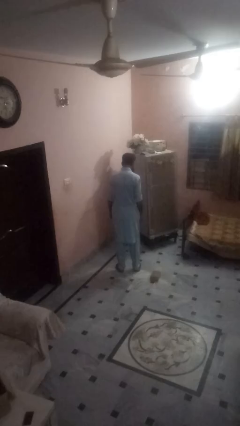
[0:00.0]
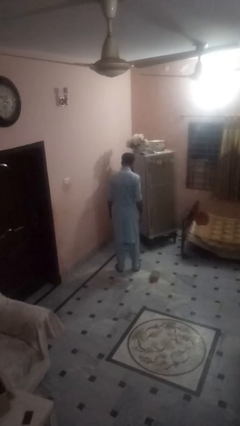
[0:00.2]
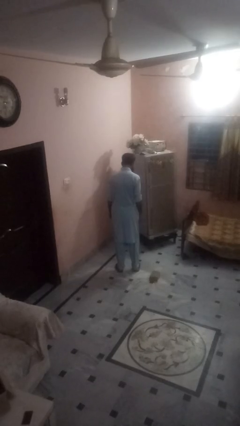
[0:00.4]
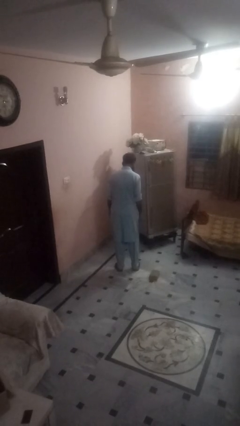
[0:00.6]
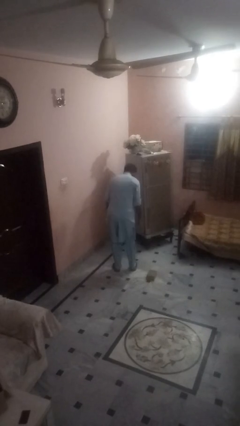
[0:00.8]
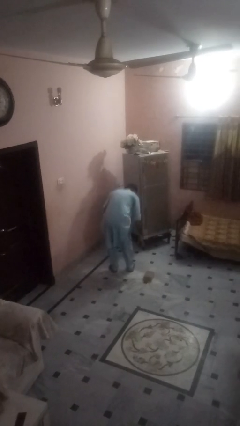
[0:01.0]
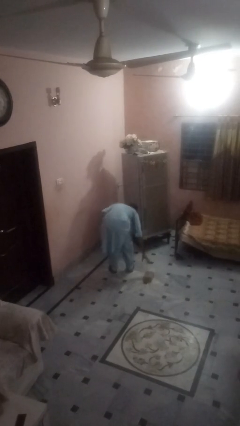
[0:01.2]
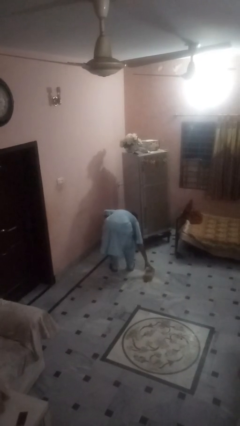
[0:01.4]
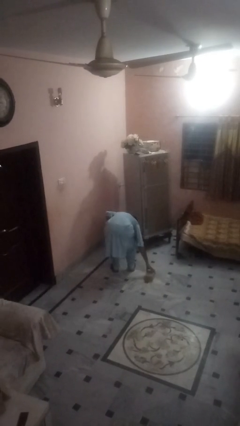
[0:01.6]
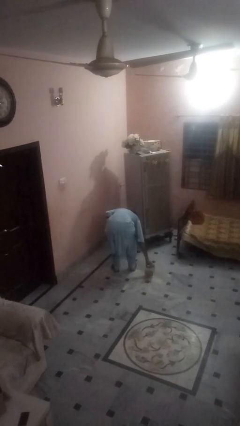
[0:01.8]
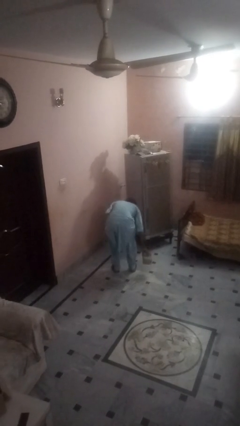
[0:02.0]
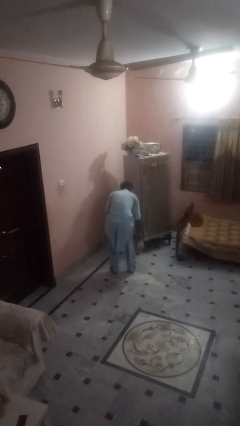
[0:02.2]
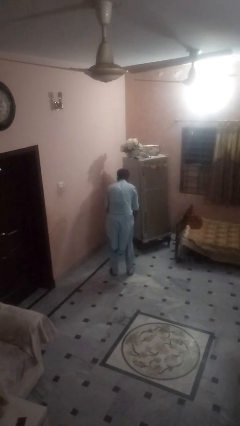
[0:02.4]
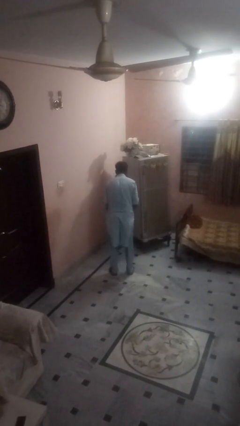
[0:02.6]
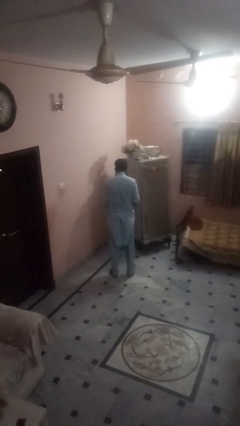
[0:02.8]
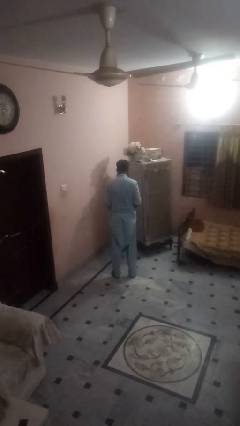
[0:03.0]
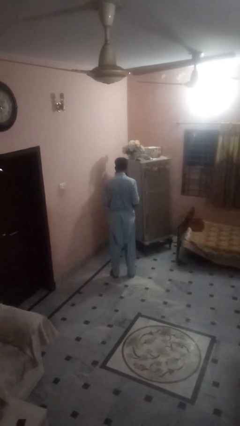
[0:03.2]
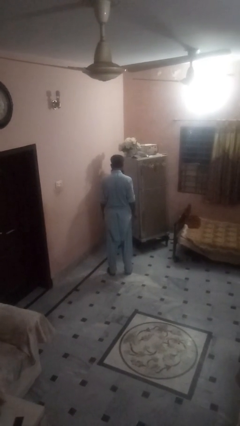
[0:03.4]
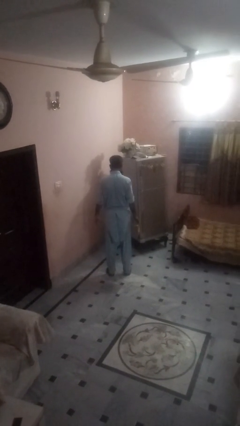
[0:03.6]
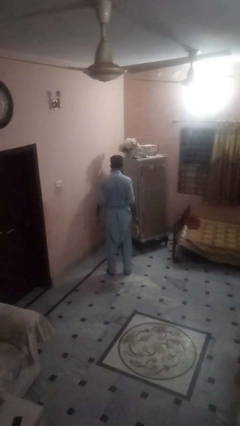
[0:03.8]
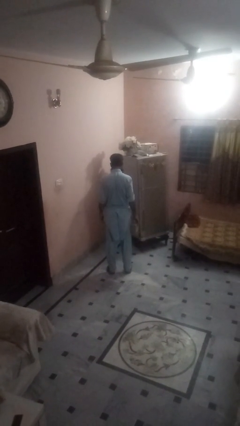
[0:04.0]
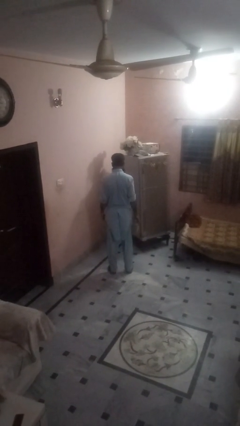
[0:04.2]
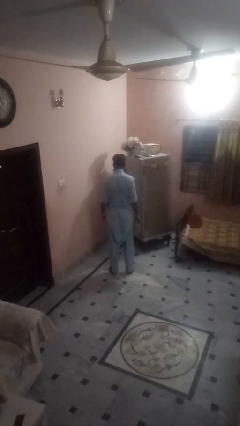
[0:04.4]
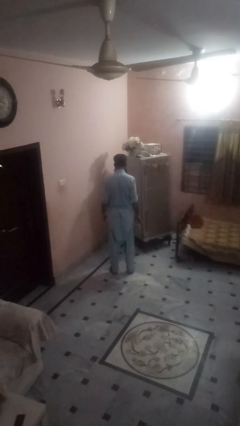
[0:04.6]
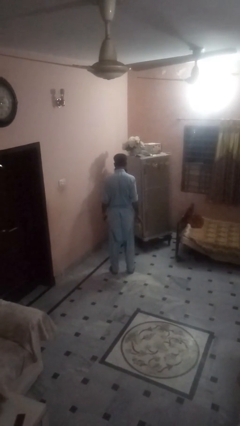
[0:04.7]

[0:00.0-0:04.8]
person picks up object from floor

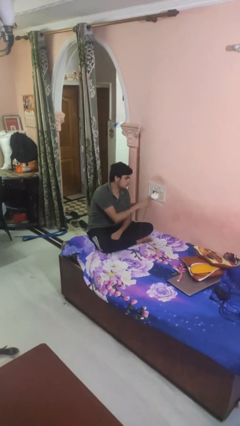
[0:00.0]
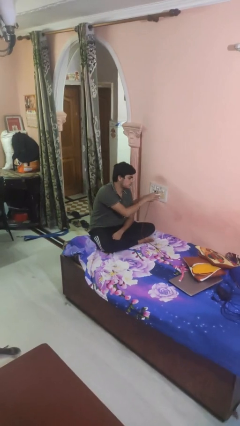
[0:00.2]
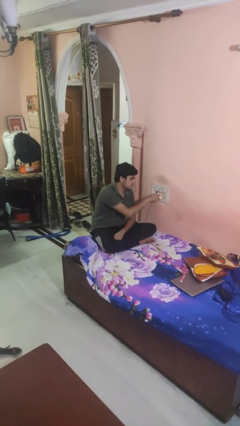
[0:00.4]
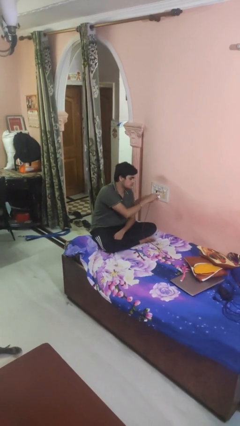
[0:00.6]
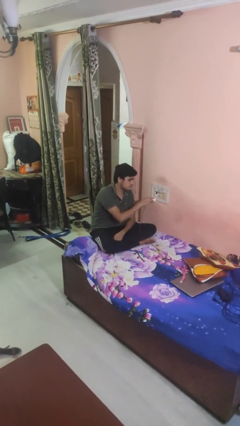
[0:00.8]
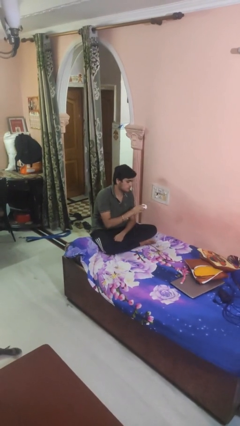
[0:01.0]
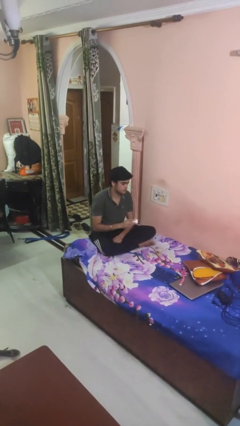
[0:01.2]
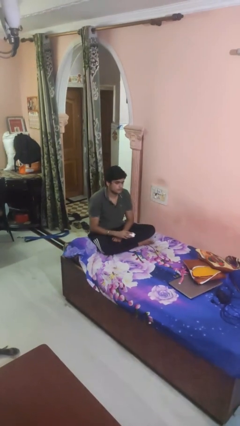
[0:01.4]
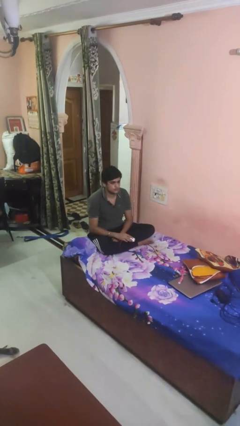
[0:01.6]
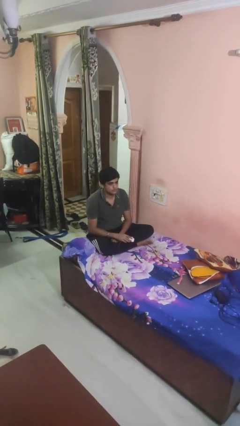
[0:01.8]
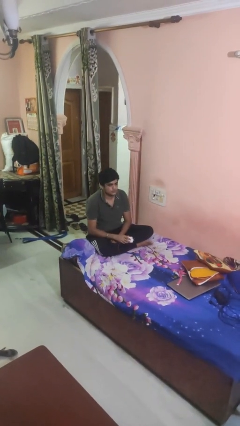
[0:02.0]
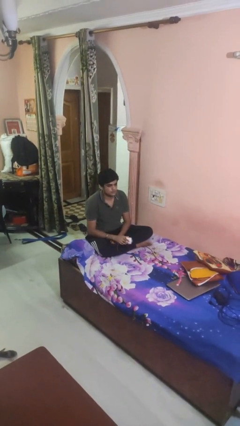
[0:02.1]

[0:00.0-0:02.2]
person unplugs from electrical socket

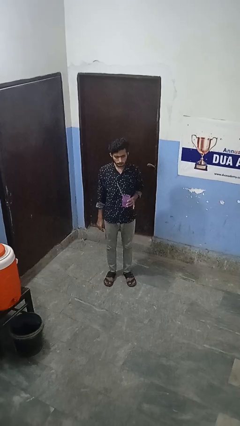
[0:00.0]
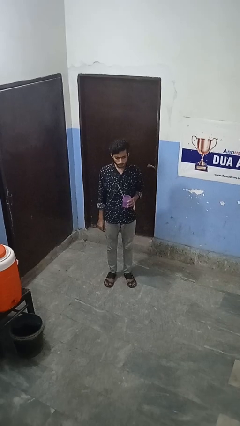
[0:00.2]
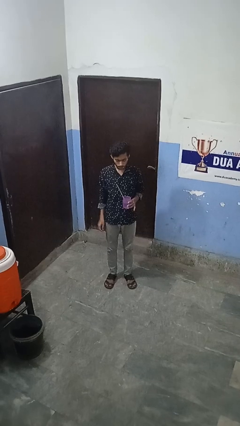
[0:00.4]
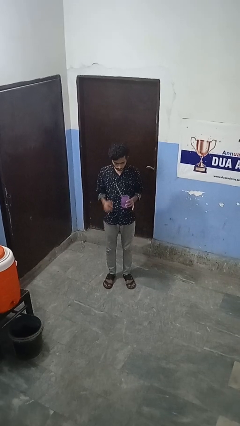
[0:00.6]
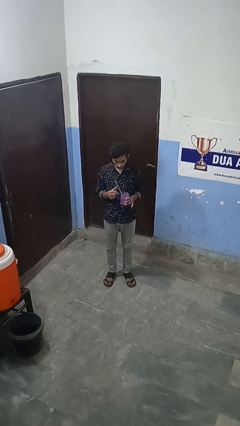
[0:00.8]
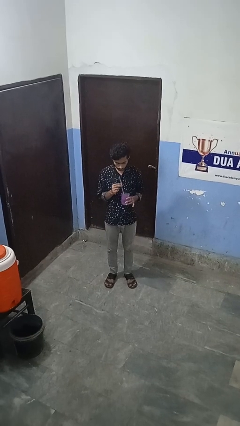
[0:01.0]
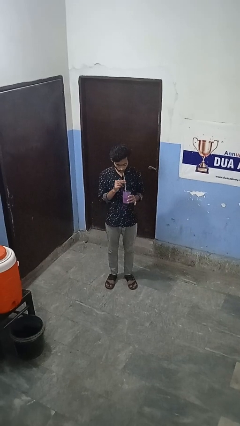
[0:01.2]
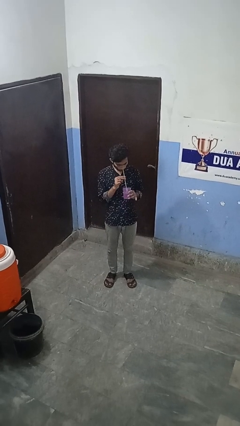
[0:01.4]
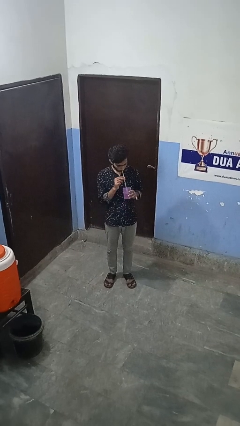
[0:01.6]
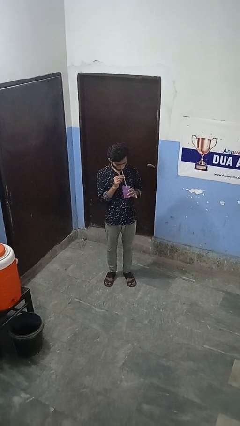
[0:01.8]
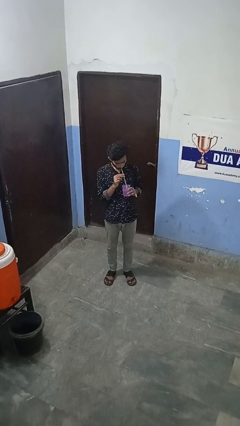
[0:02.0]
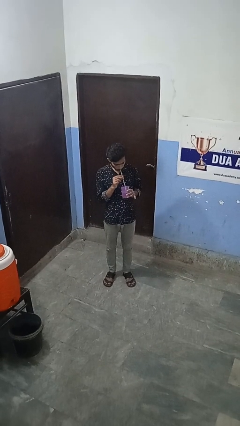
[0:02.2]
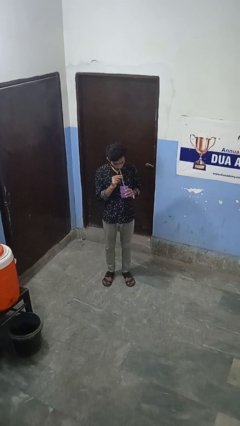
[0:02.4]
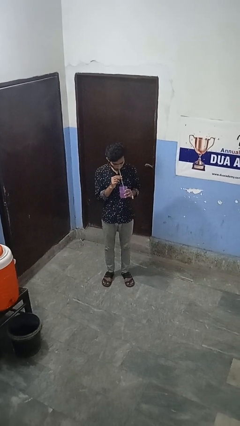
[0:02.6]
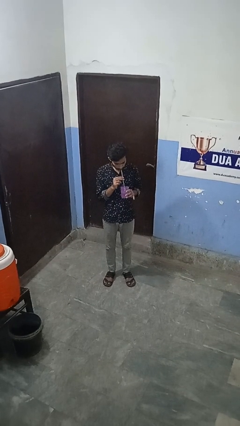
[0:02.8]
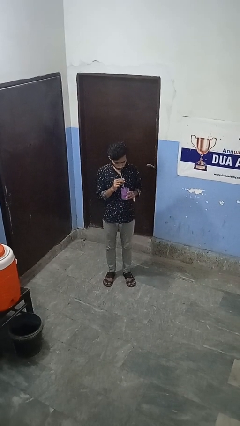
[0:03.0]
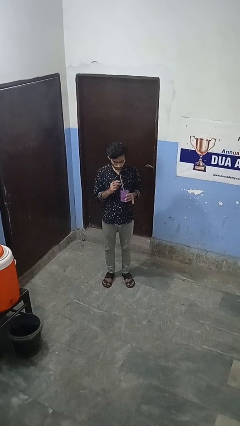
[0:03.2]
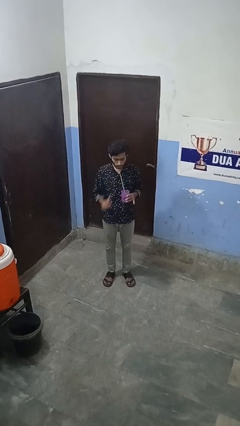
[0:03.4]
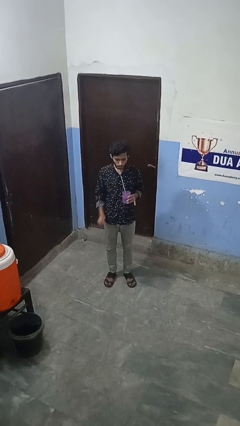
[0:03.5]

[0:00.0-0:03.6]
person drinks from straw

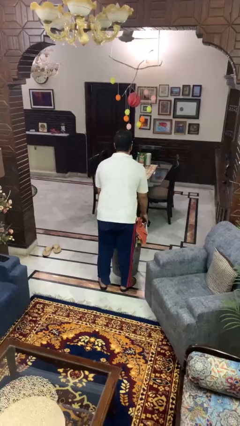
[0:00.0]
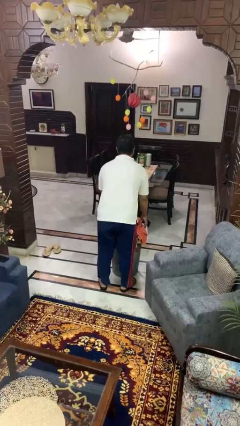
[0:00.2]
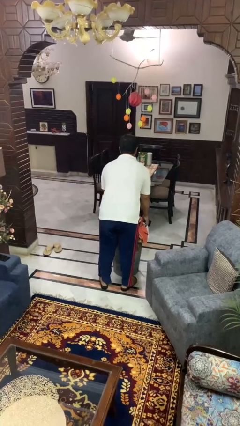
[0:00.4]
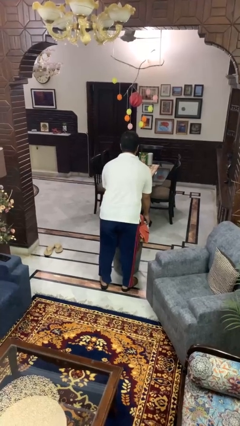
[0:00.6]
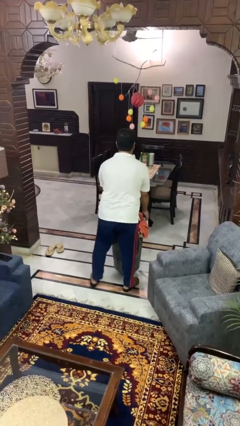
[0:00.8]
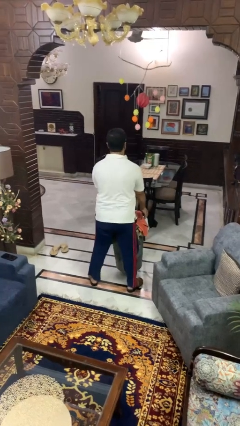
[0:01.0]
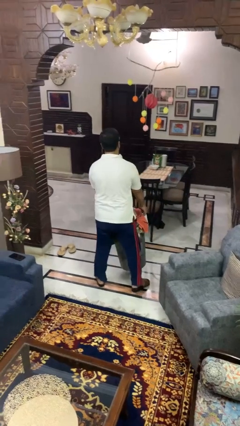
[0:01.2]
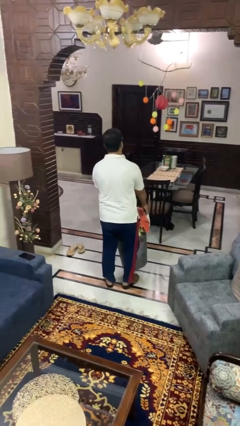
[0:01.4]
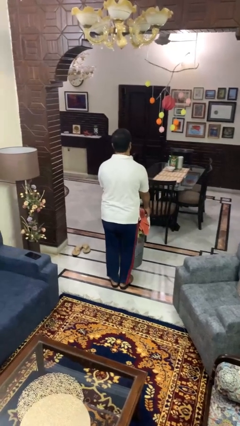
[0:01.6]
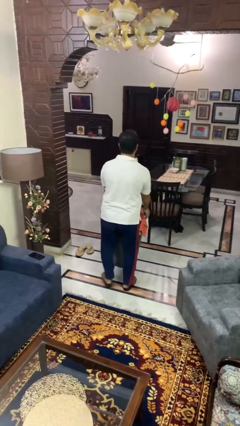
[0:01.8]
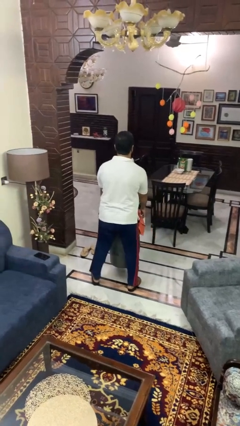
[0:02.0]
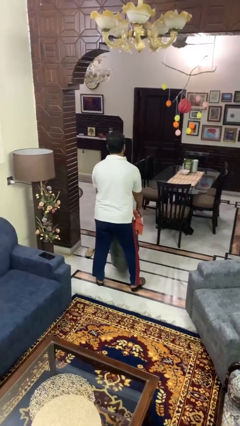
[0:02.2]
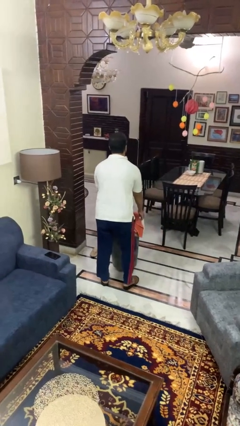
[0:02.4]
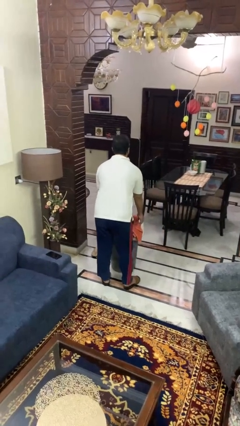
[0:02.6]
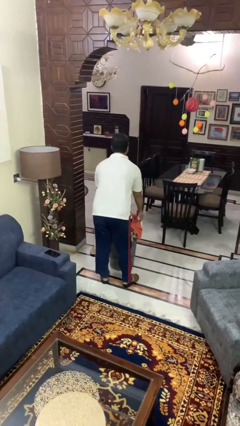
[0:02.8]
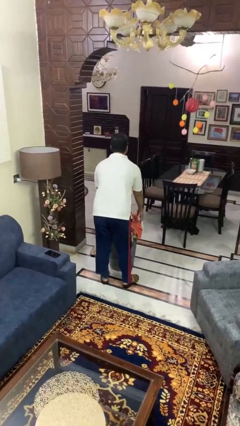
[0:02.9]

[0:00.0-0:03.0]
person carries laundry basket

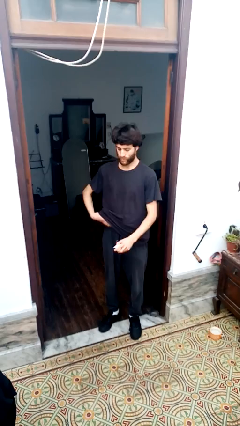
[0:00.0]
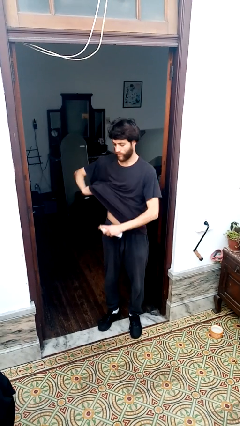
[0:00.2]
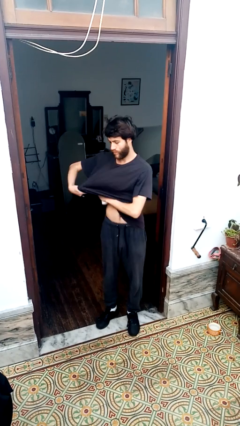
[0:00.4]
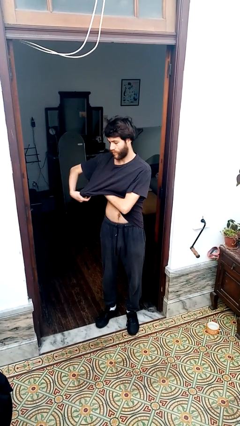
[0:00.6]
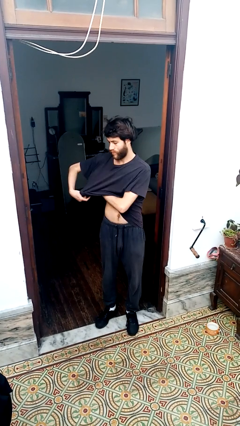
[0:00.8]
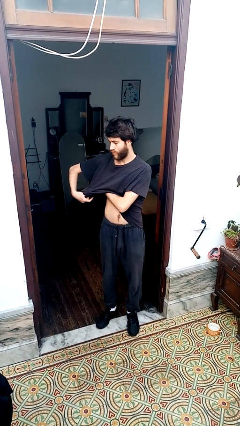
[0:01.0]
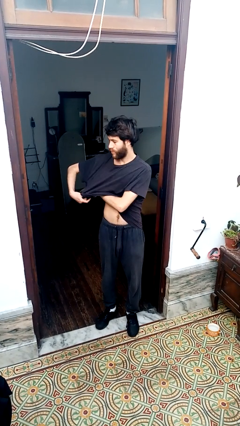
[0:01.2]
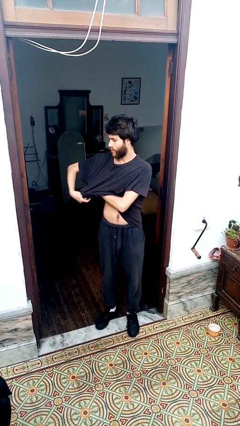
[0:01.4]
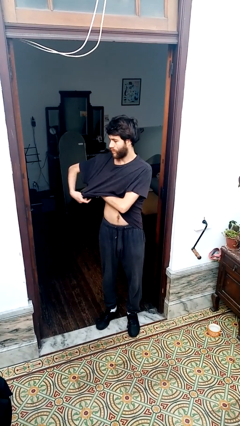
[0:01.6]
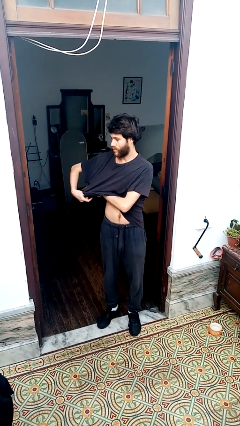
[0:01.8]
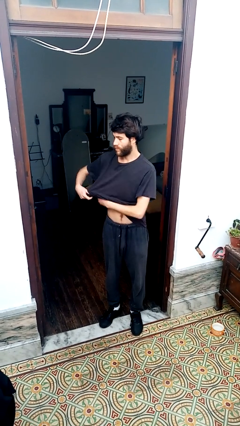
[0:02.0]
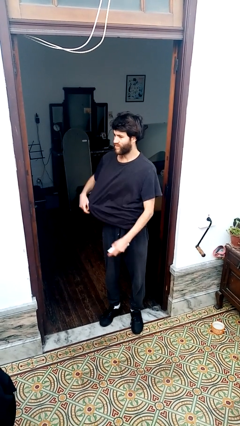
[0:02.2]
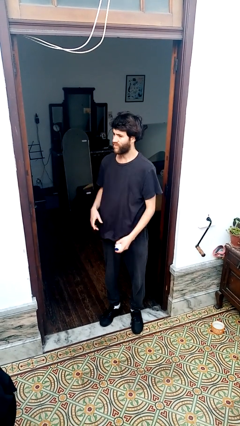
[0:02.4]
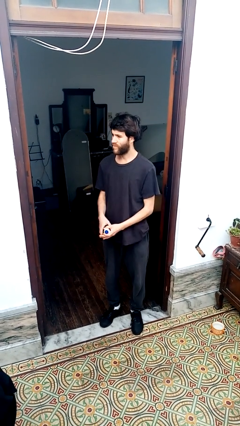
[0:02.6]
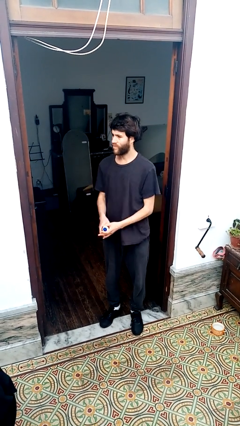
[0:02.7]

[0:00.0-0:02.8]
person applies deodorant

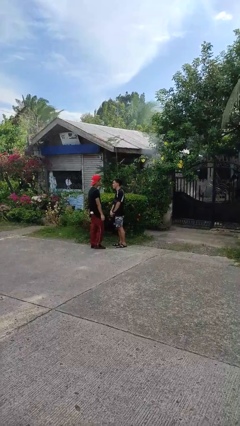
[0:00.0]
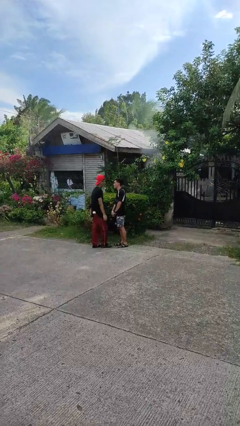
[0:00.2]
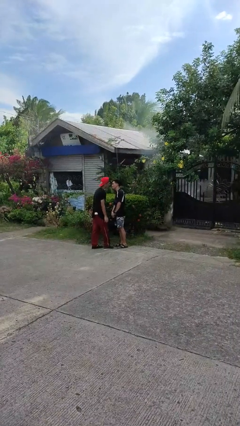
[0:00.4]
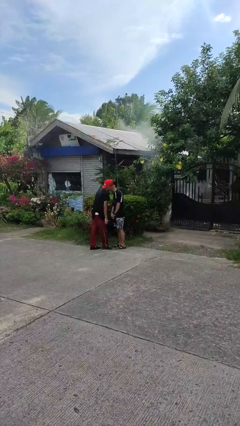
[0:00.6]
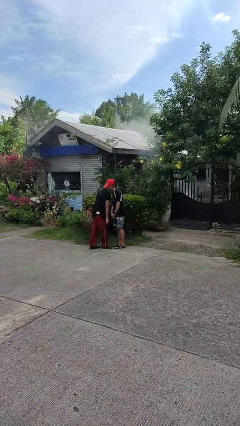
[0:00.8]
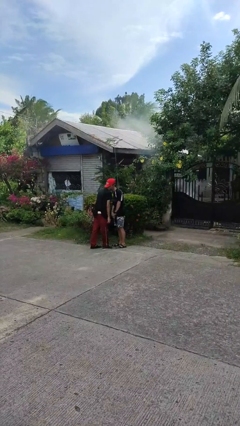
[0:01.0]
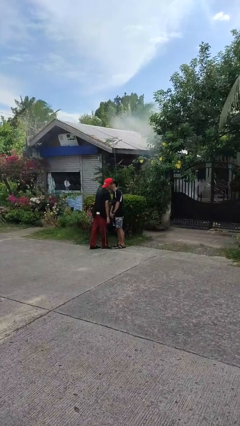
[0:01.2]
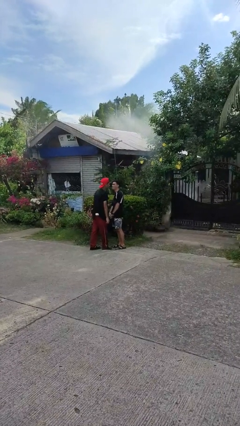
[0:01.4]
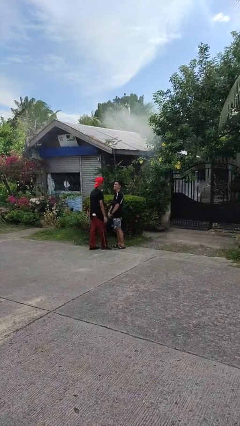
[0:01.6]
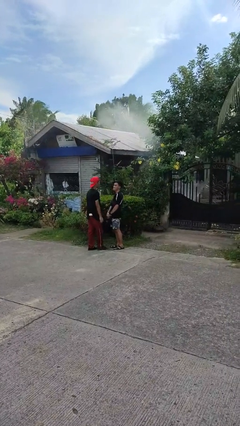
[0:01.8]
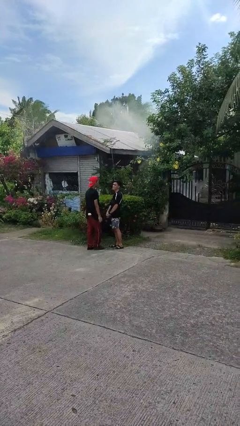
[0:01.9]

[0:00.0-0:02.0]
person kisses cheek of person
